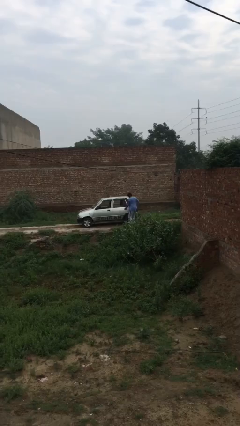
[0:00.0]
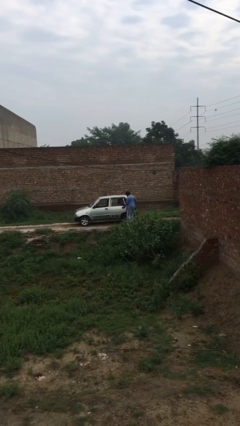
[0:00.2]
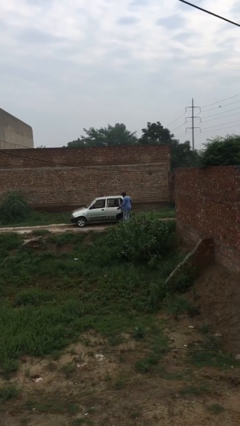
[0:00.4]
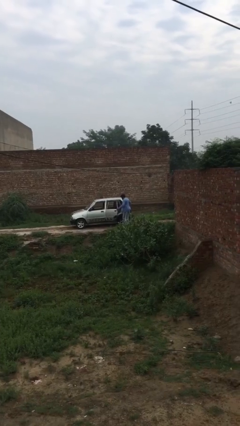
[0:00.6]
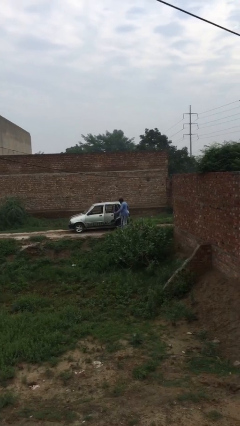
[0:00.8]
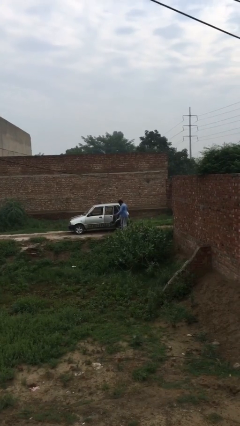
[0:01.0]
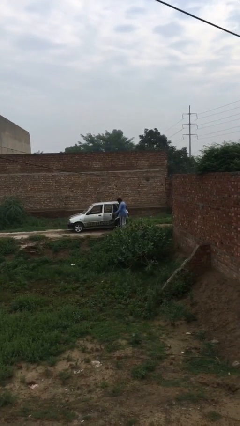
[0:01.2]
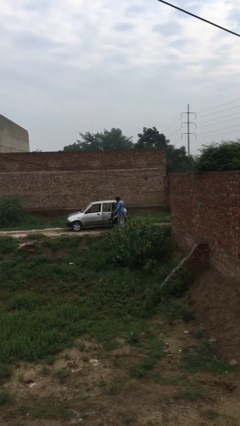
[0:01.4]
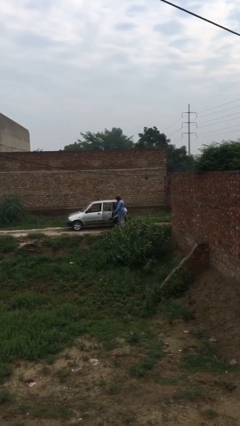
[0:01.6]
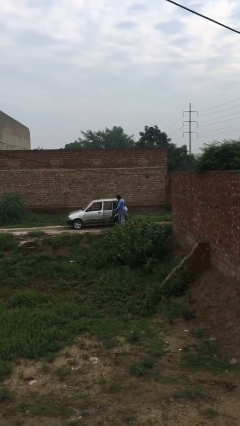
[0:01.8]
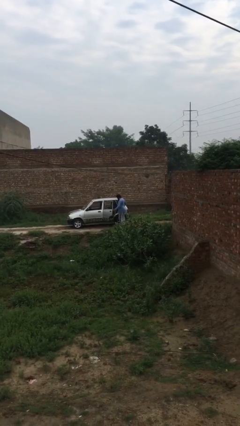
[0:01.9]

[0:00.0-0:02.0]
person opens car door

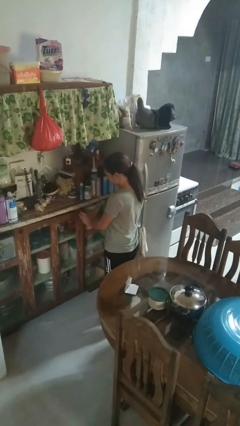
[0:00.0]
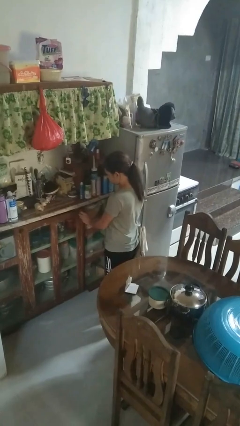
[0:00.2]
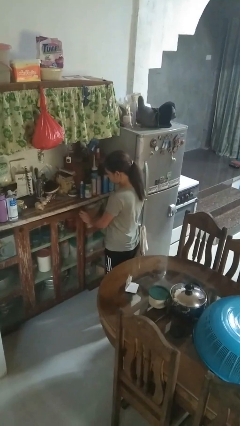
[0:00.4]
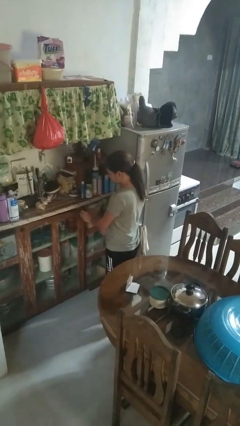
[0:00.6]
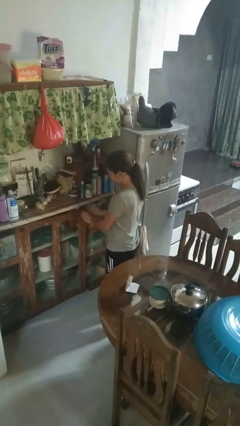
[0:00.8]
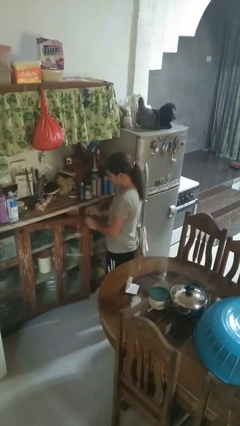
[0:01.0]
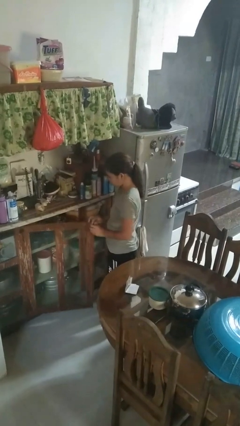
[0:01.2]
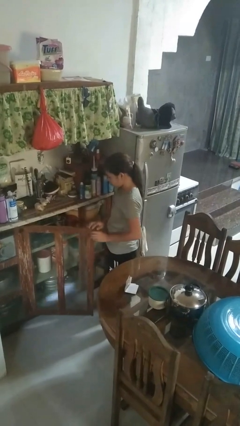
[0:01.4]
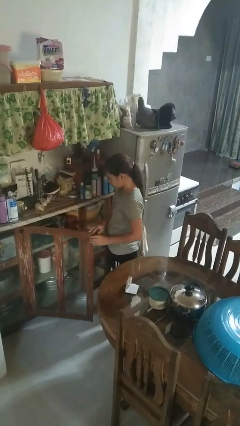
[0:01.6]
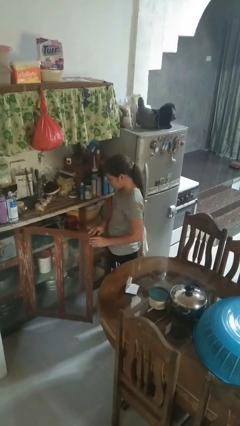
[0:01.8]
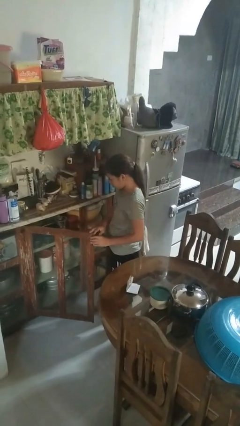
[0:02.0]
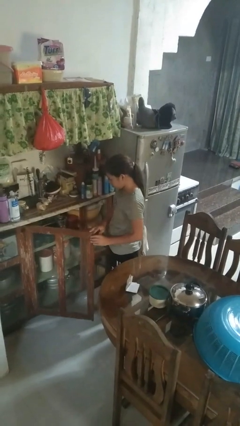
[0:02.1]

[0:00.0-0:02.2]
person opens cabinet

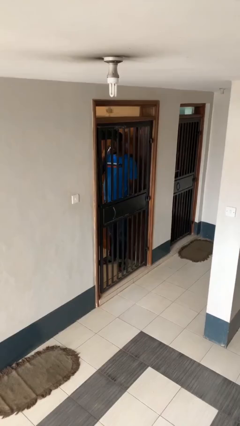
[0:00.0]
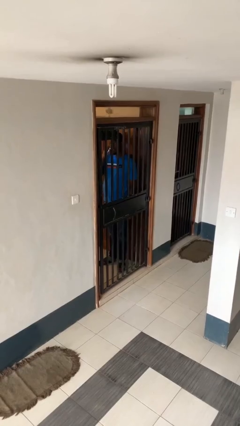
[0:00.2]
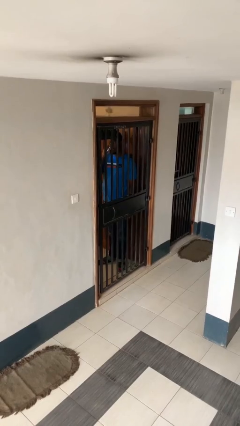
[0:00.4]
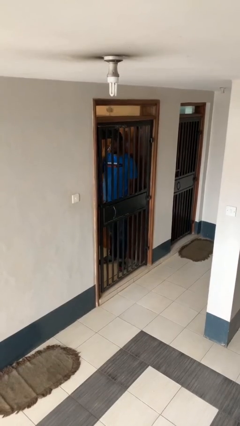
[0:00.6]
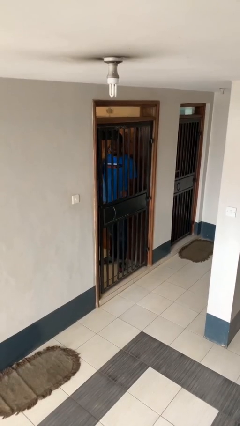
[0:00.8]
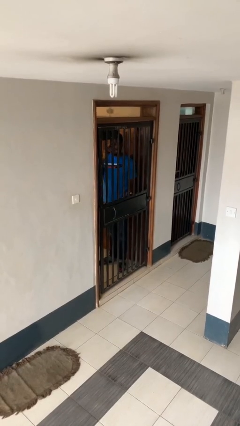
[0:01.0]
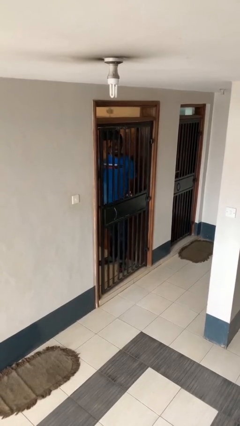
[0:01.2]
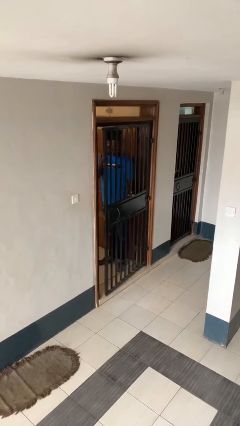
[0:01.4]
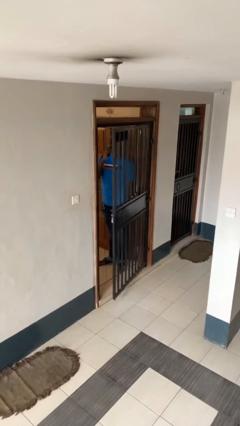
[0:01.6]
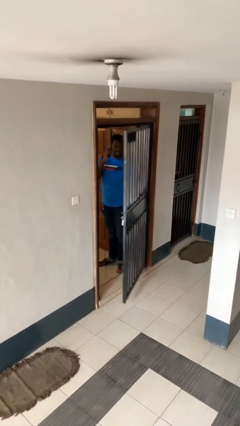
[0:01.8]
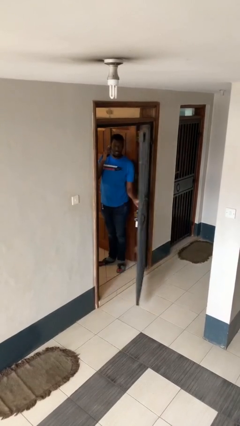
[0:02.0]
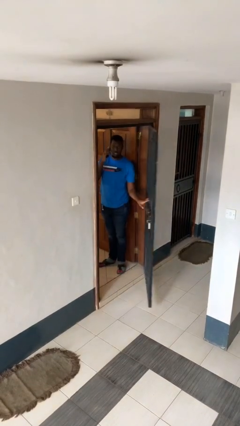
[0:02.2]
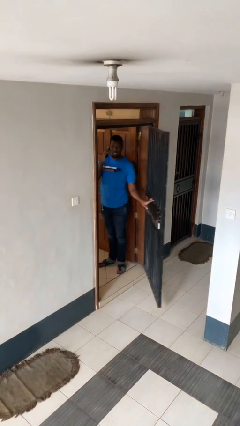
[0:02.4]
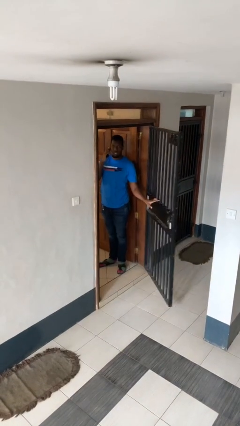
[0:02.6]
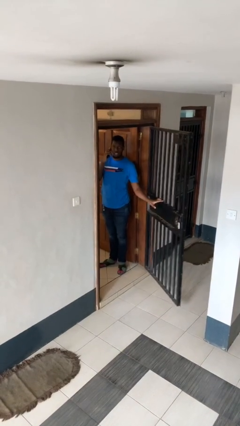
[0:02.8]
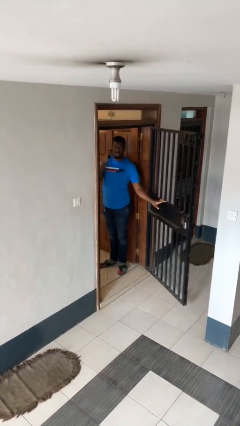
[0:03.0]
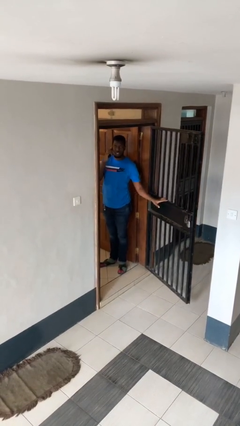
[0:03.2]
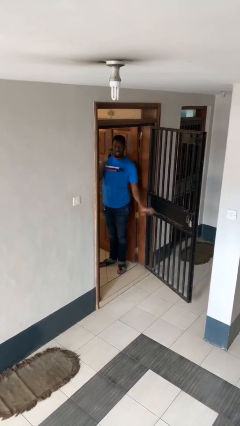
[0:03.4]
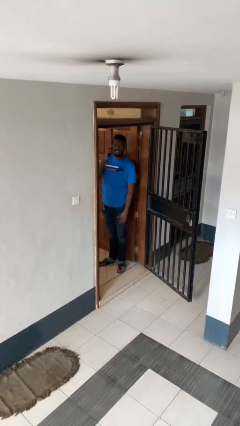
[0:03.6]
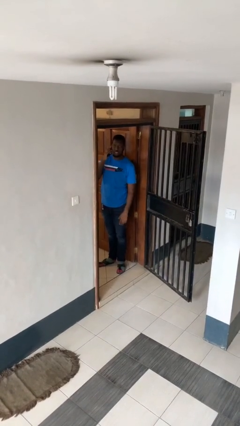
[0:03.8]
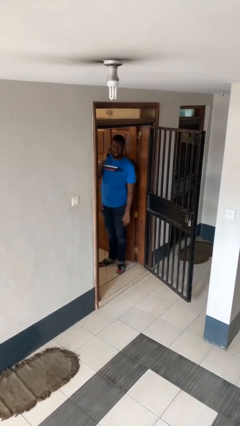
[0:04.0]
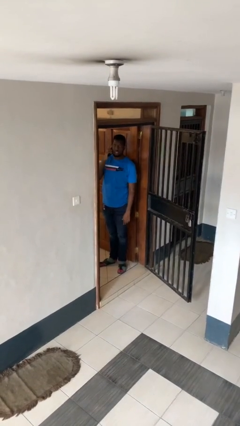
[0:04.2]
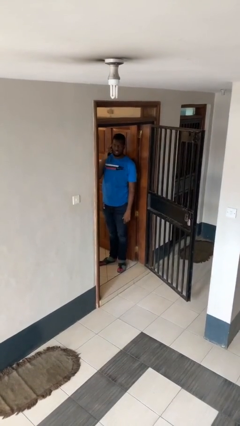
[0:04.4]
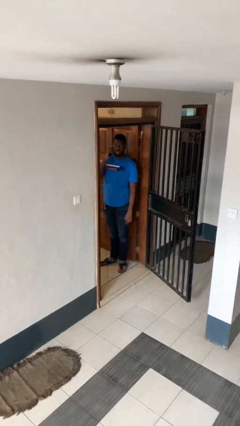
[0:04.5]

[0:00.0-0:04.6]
person opens facility door

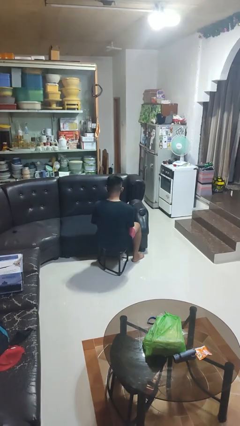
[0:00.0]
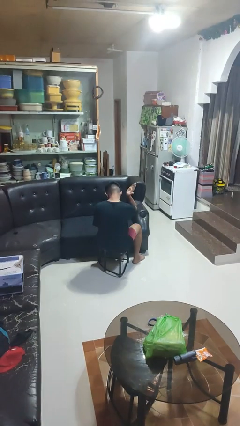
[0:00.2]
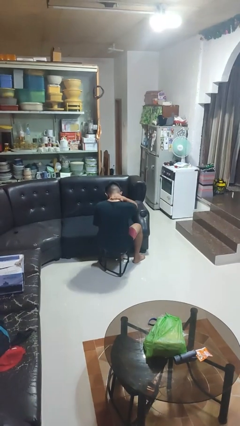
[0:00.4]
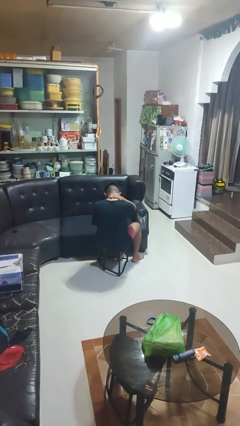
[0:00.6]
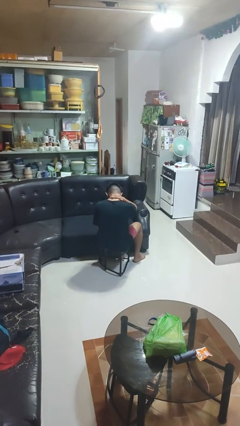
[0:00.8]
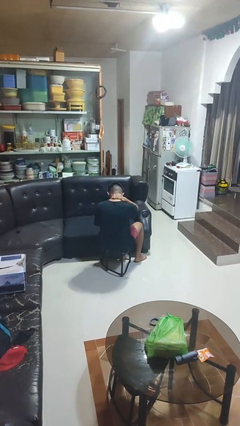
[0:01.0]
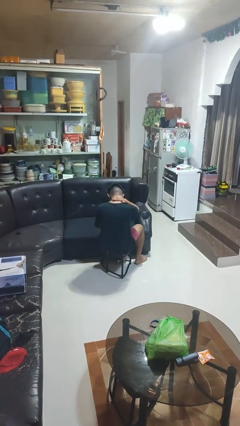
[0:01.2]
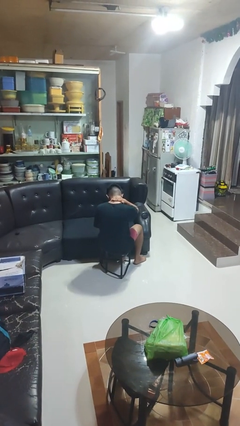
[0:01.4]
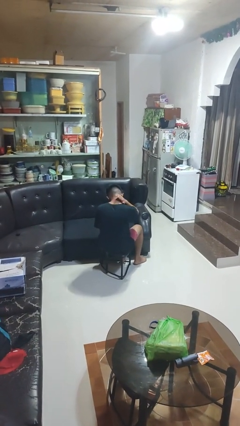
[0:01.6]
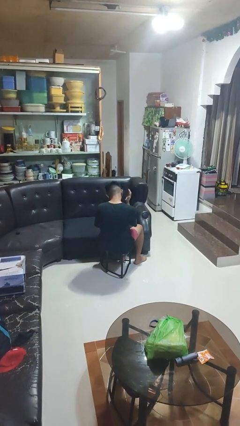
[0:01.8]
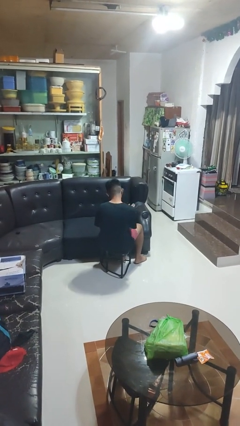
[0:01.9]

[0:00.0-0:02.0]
person swats bug

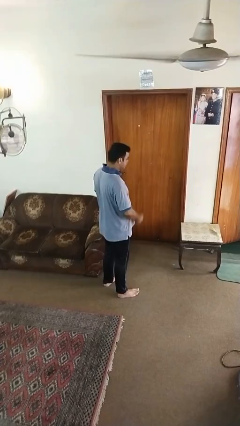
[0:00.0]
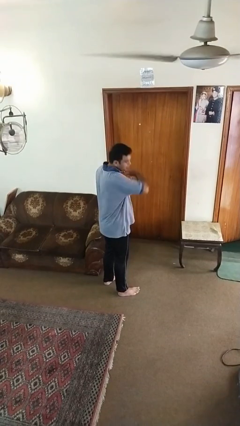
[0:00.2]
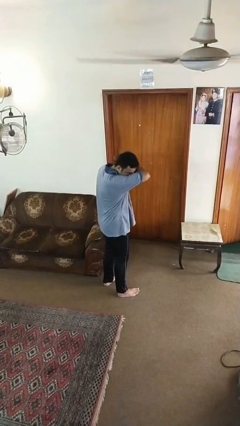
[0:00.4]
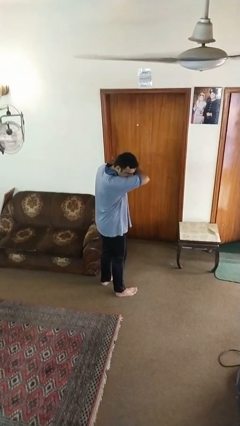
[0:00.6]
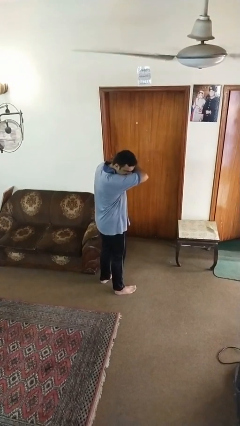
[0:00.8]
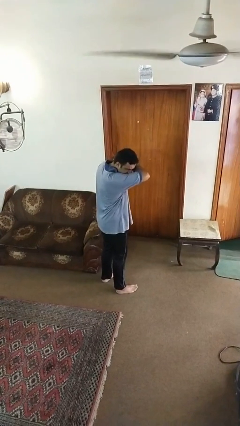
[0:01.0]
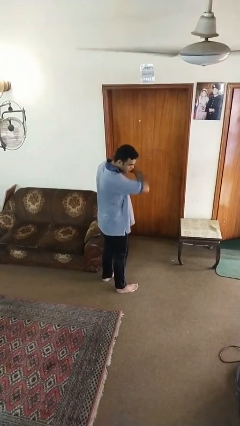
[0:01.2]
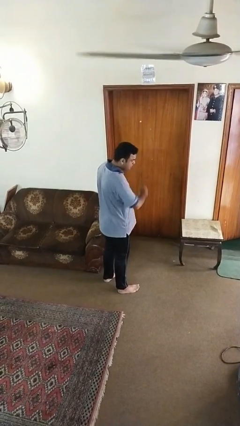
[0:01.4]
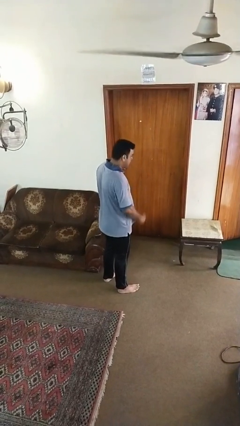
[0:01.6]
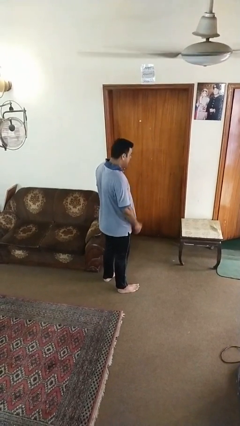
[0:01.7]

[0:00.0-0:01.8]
person sneezes into arm

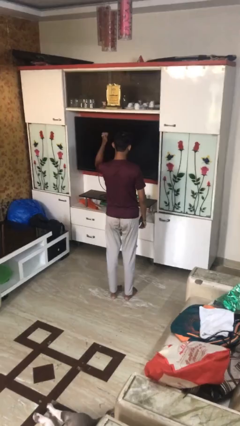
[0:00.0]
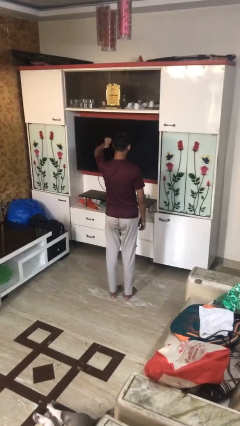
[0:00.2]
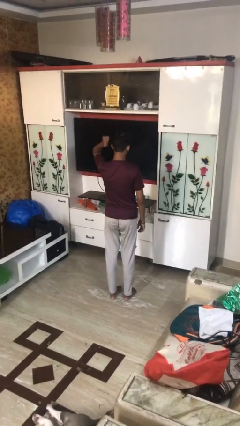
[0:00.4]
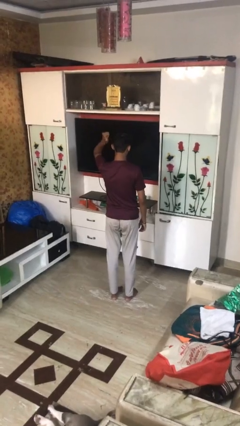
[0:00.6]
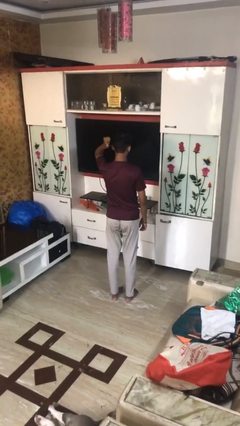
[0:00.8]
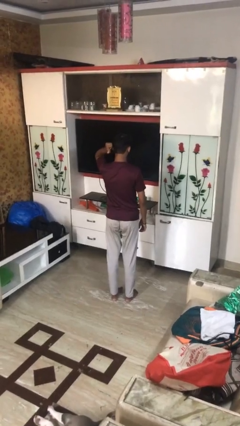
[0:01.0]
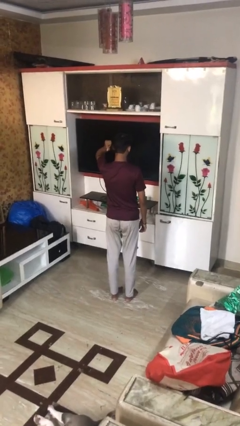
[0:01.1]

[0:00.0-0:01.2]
person gestures behind me

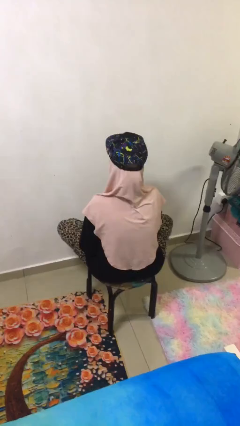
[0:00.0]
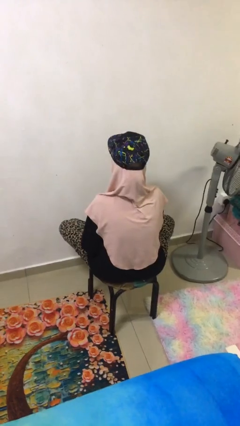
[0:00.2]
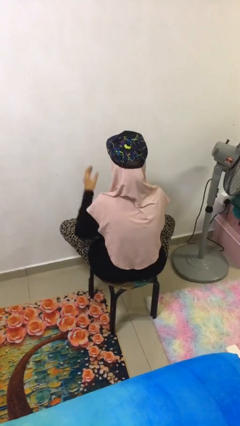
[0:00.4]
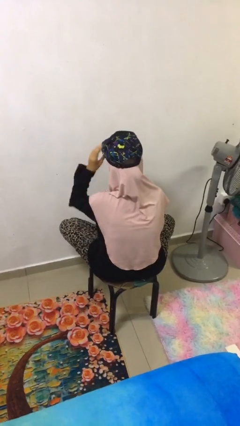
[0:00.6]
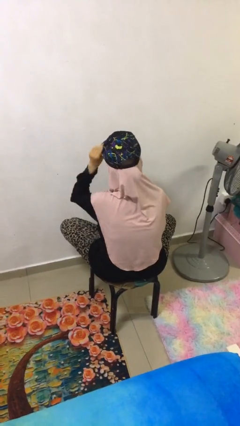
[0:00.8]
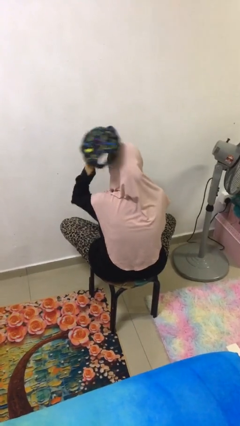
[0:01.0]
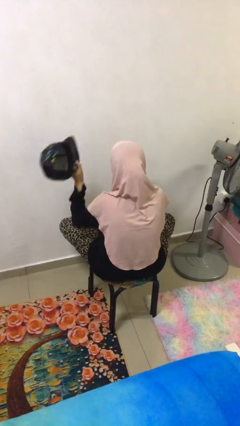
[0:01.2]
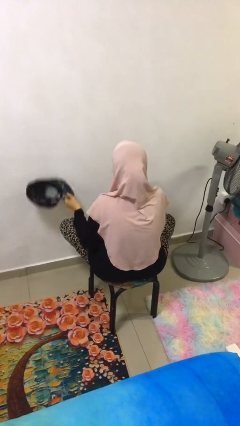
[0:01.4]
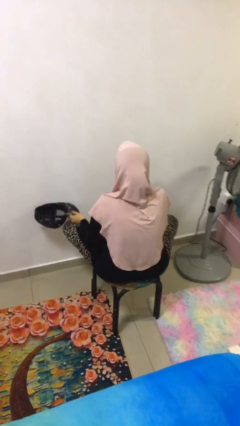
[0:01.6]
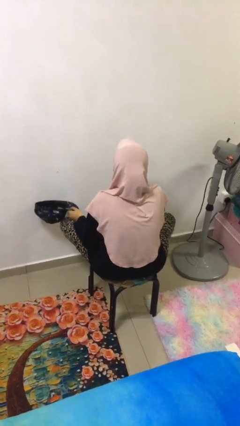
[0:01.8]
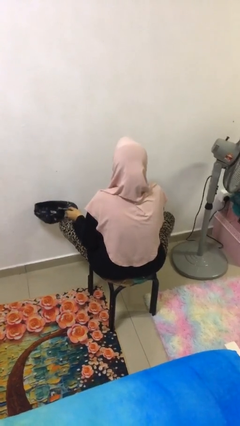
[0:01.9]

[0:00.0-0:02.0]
person takes off hat

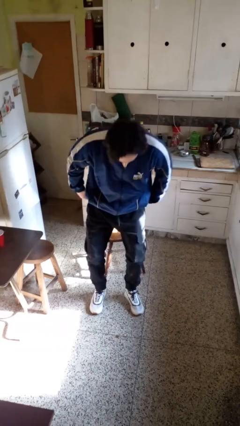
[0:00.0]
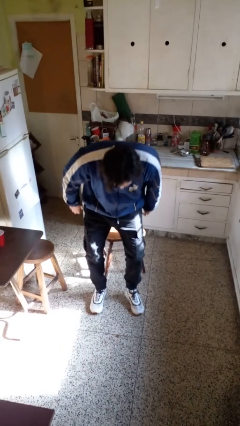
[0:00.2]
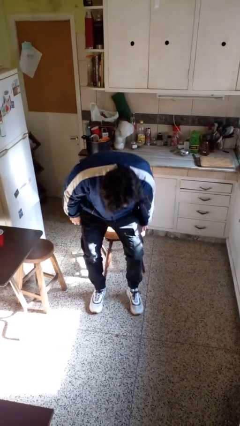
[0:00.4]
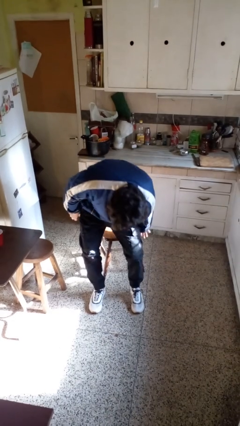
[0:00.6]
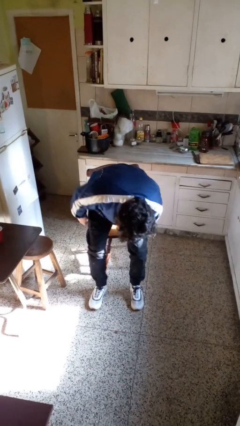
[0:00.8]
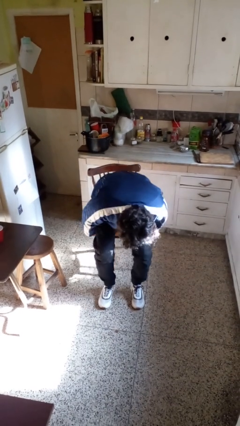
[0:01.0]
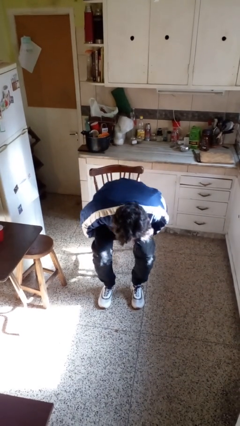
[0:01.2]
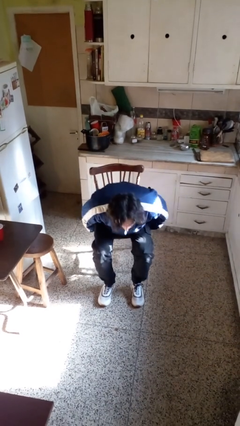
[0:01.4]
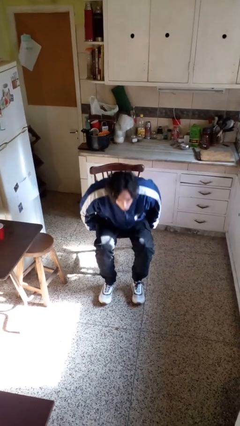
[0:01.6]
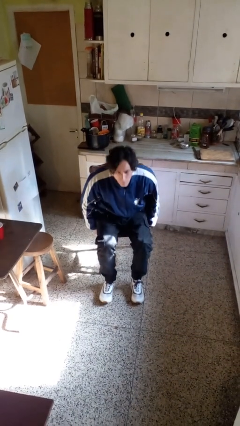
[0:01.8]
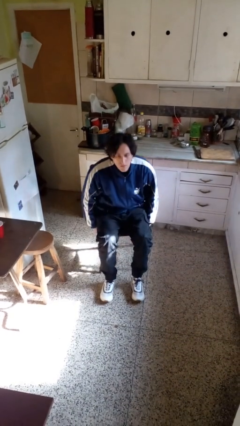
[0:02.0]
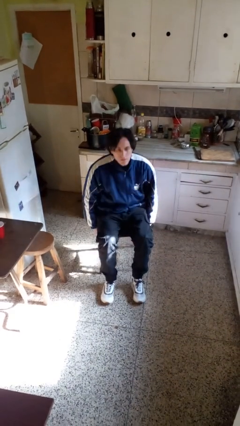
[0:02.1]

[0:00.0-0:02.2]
person sits down
